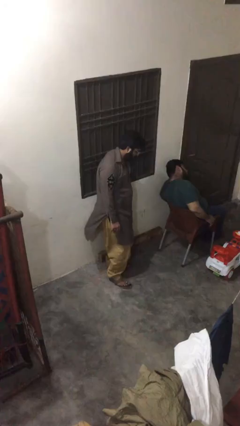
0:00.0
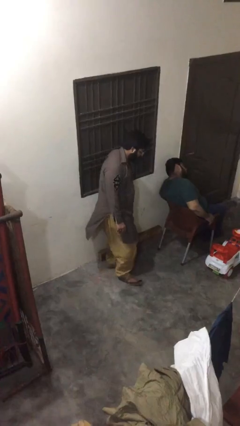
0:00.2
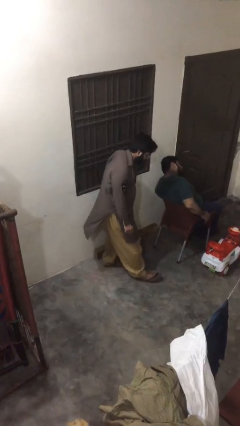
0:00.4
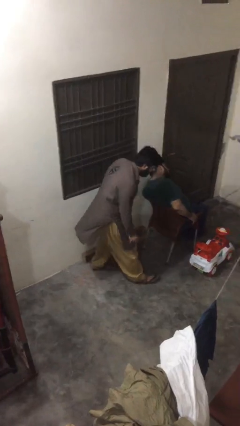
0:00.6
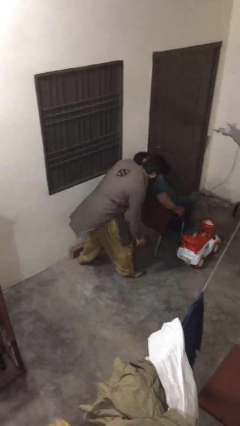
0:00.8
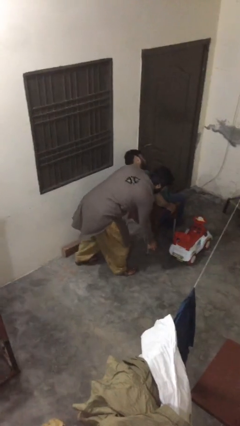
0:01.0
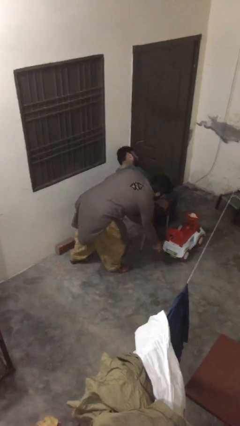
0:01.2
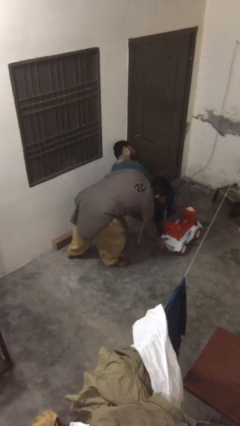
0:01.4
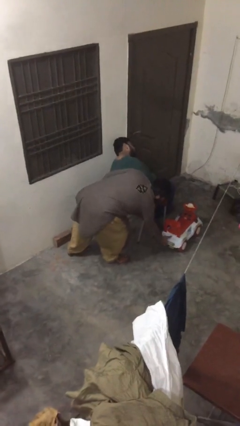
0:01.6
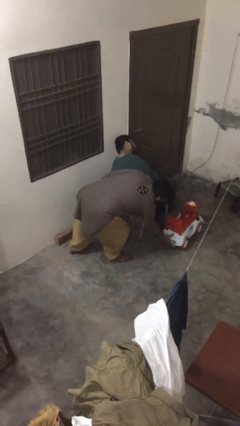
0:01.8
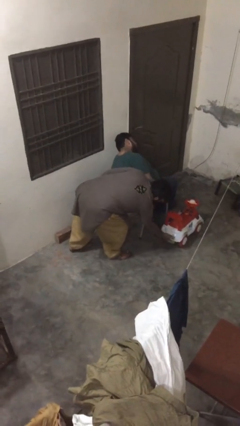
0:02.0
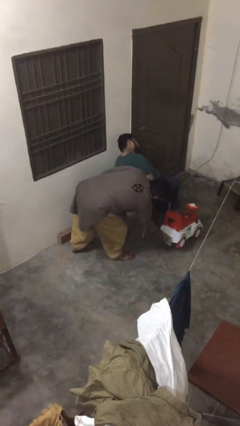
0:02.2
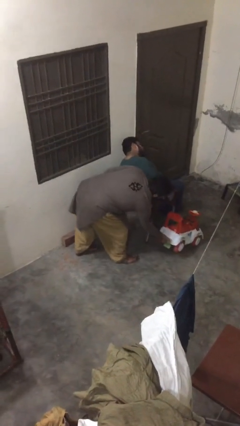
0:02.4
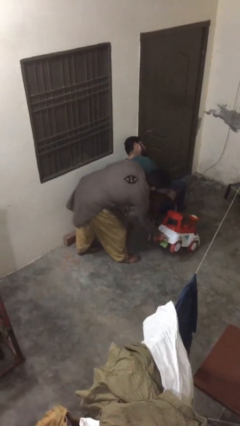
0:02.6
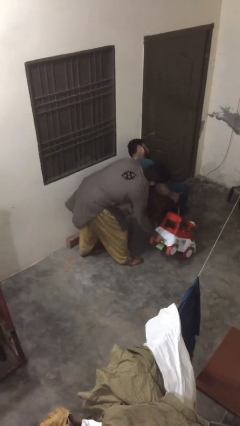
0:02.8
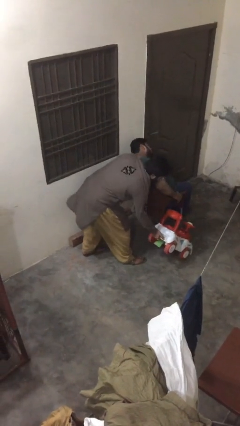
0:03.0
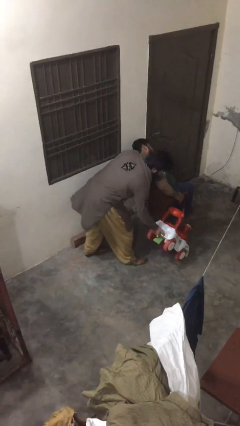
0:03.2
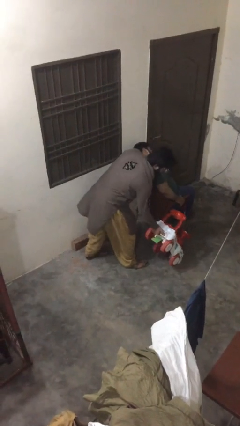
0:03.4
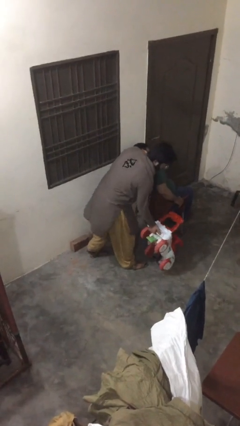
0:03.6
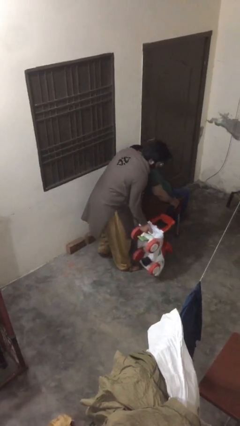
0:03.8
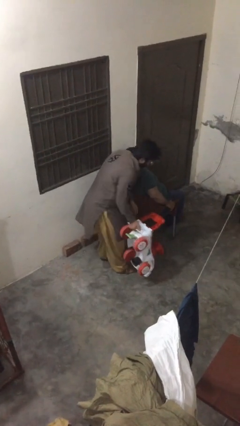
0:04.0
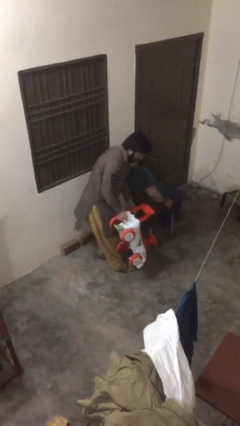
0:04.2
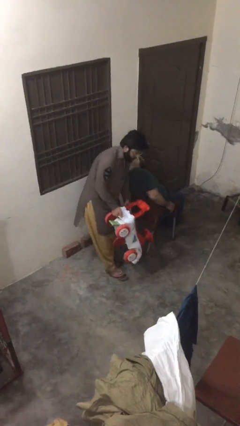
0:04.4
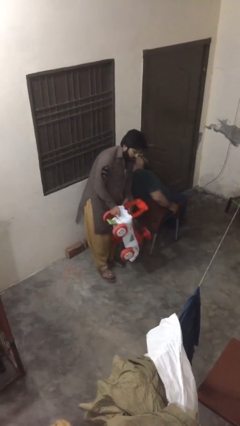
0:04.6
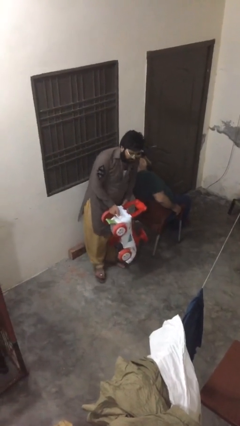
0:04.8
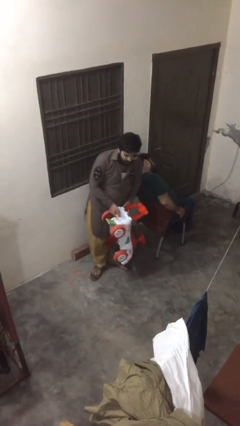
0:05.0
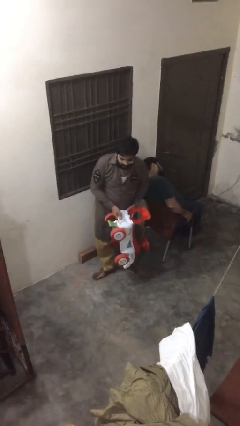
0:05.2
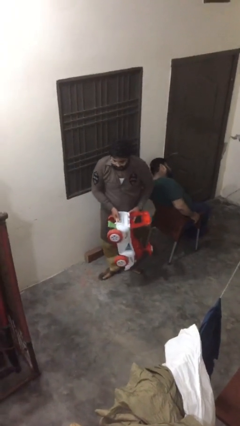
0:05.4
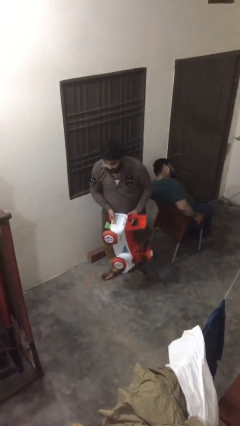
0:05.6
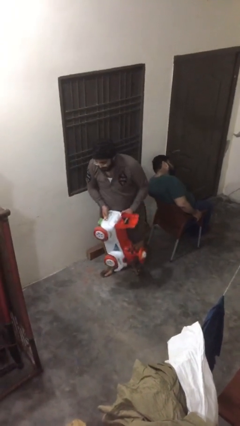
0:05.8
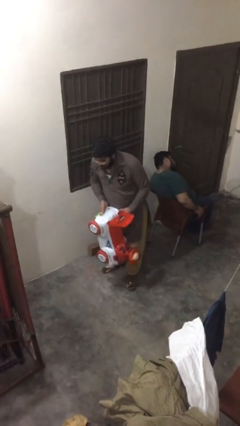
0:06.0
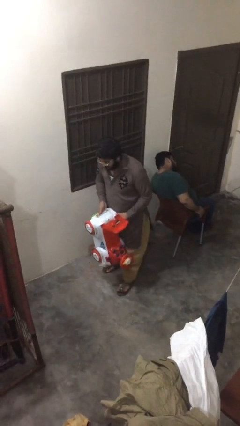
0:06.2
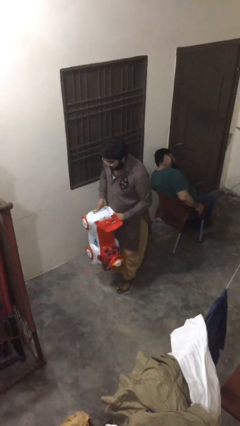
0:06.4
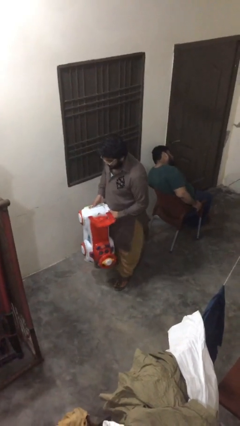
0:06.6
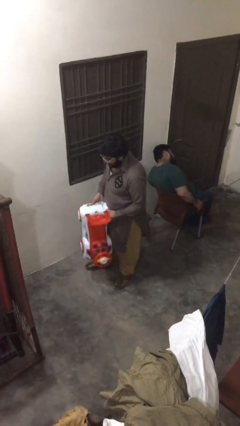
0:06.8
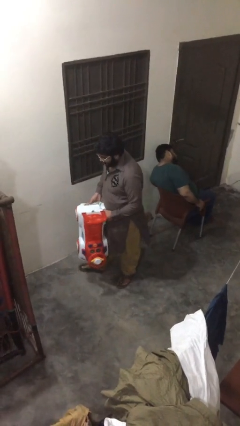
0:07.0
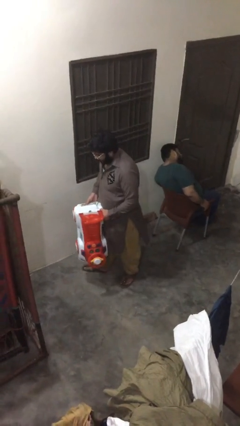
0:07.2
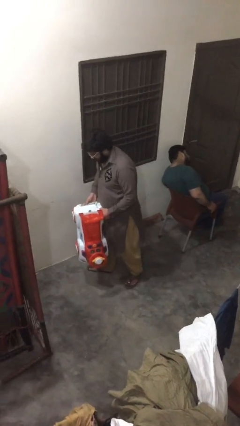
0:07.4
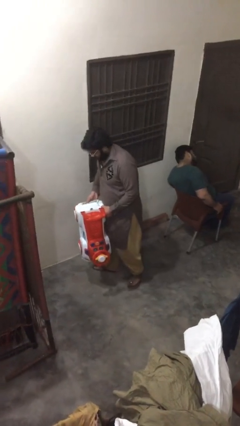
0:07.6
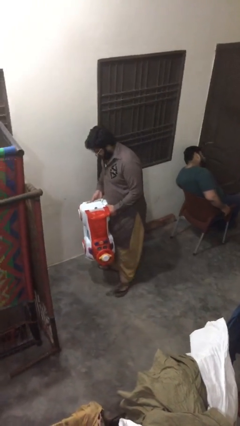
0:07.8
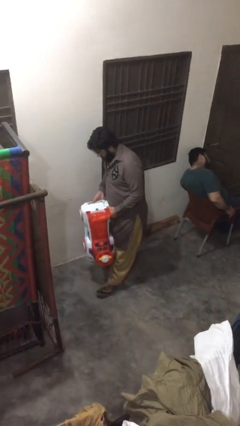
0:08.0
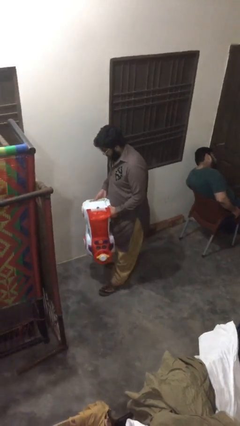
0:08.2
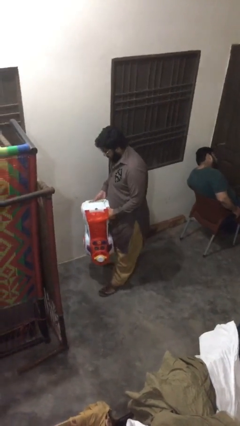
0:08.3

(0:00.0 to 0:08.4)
person steals object from person

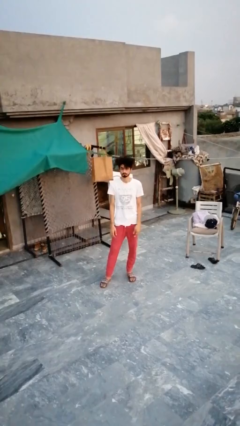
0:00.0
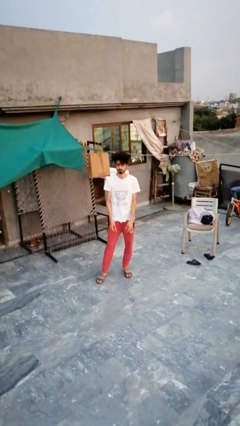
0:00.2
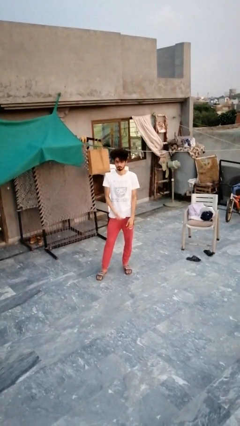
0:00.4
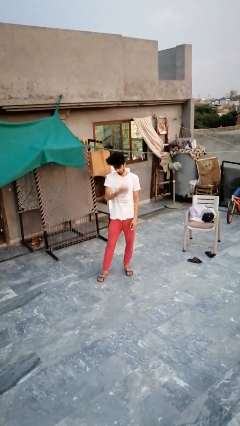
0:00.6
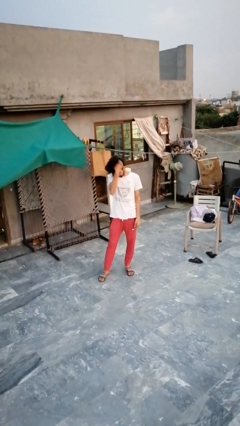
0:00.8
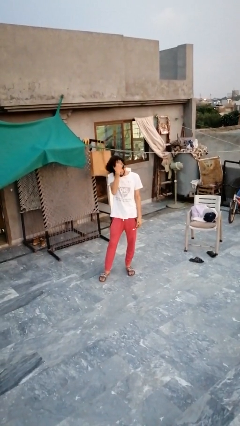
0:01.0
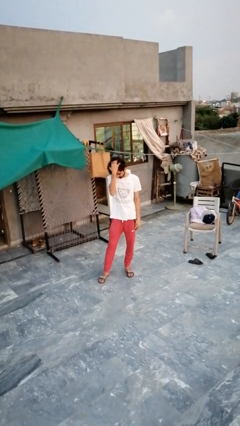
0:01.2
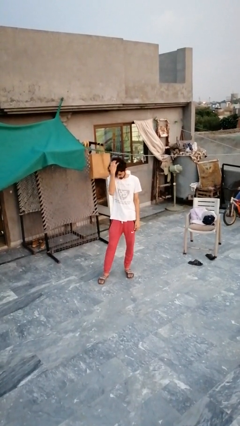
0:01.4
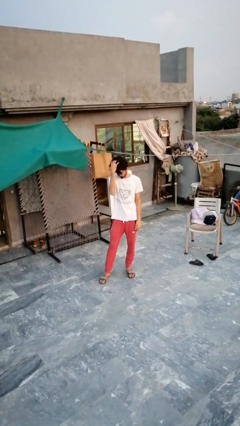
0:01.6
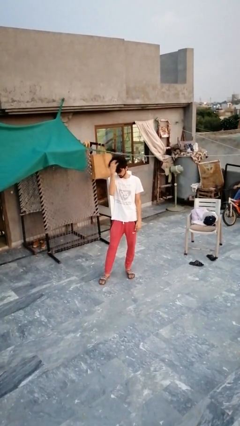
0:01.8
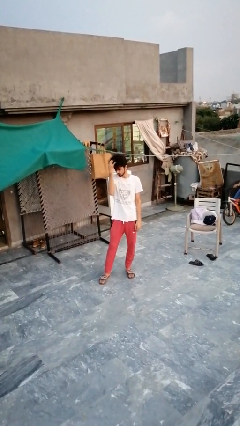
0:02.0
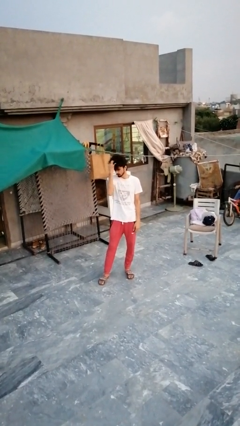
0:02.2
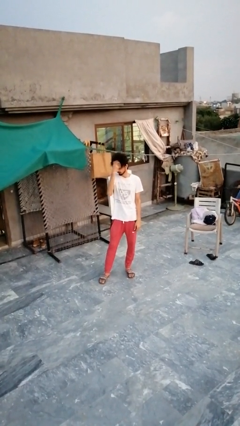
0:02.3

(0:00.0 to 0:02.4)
person strokes hair

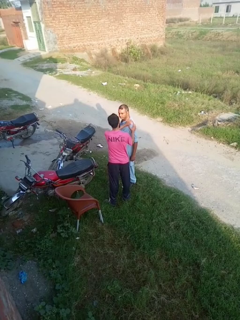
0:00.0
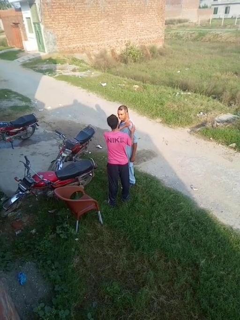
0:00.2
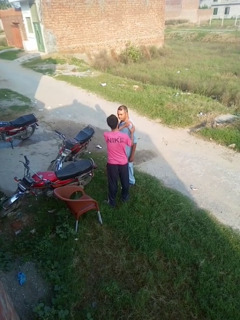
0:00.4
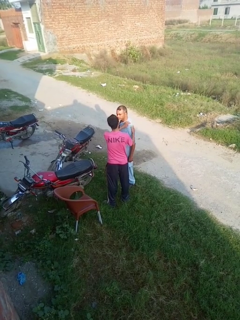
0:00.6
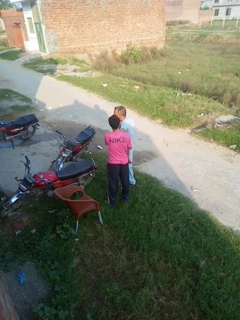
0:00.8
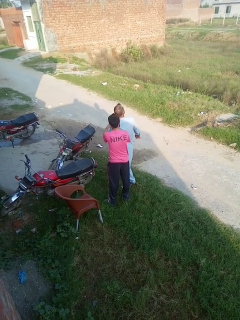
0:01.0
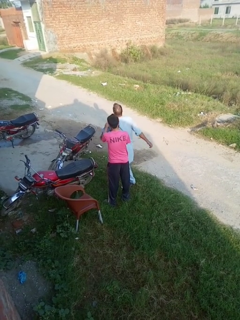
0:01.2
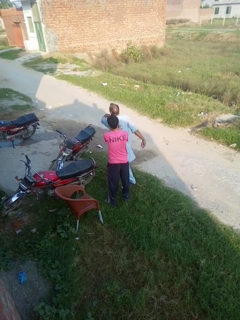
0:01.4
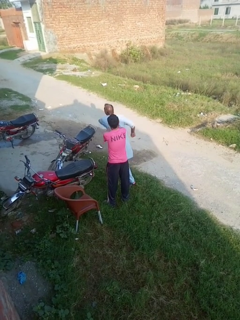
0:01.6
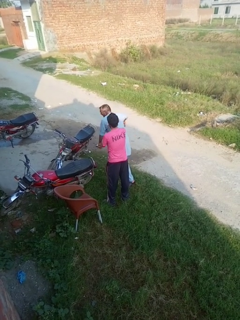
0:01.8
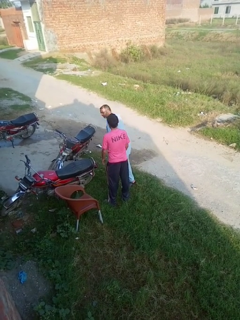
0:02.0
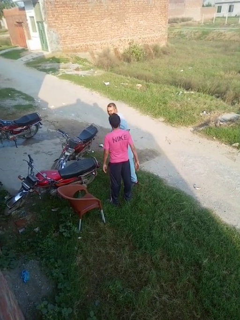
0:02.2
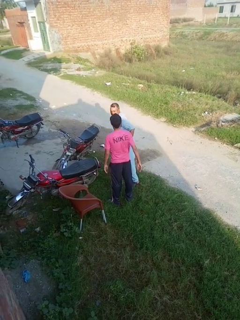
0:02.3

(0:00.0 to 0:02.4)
person spins person around

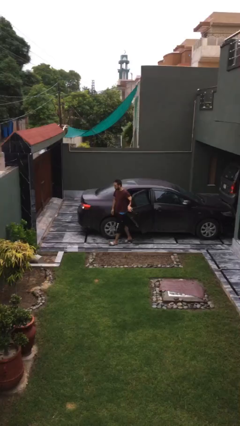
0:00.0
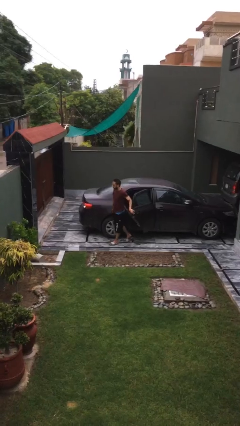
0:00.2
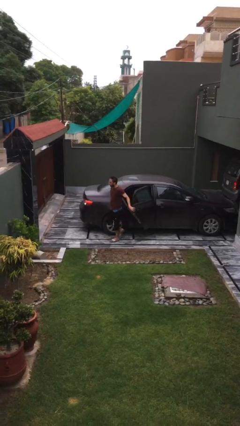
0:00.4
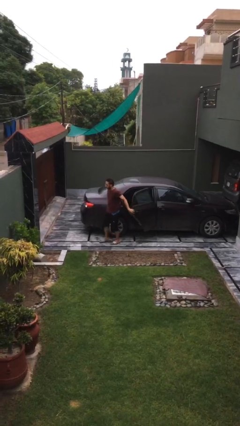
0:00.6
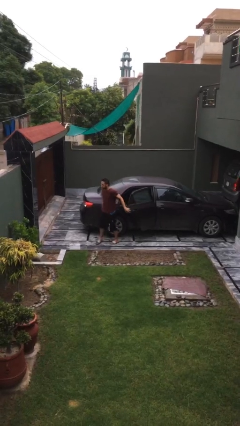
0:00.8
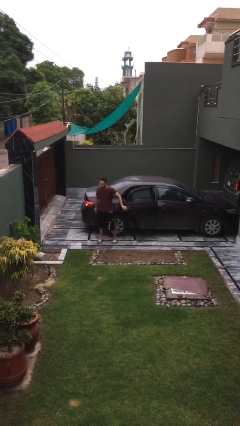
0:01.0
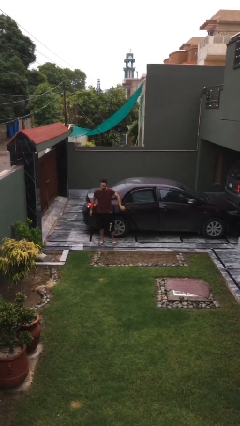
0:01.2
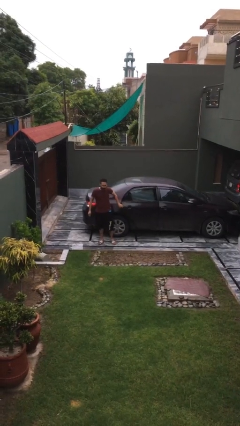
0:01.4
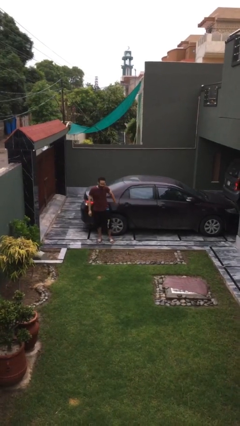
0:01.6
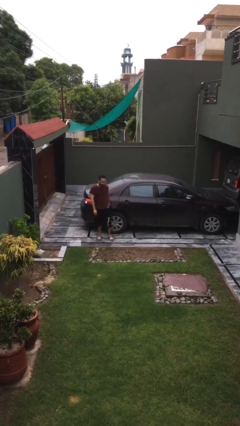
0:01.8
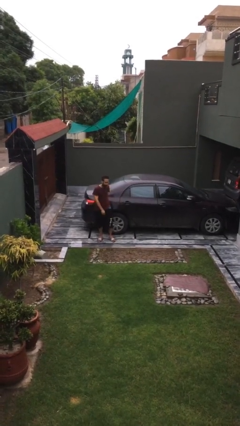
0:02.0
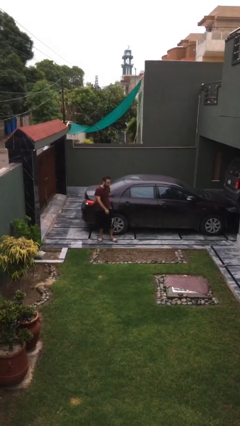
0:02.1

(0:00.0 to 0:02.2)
person closes car door

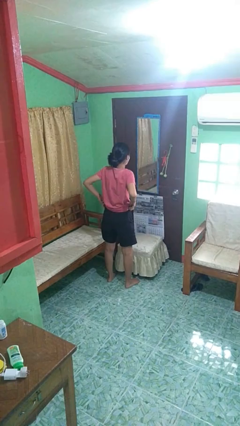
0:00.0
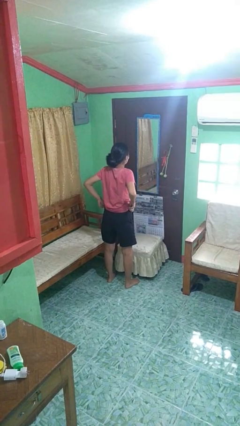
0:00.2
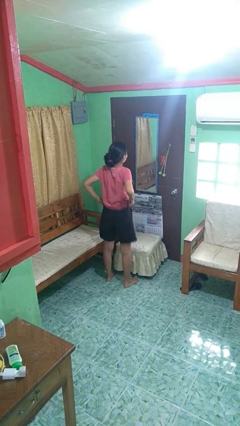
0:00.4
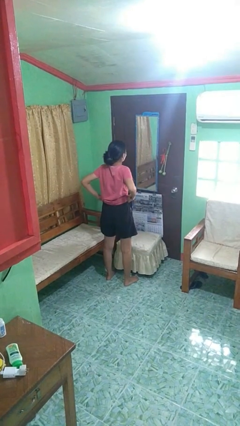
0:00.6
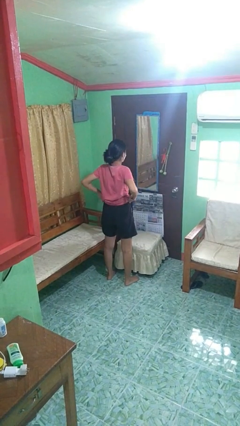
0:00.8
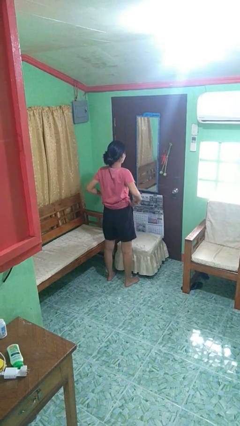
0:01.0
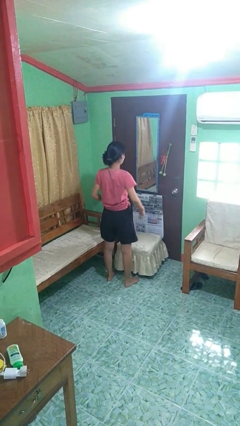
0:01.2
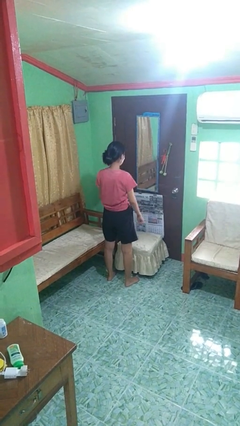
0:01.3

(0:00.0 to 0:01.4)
person hikes up pants

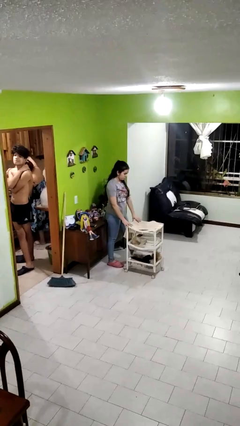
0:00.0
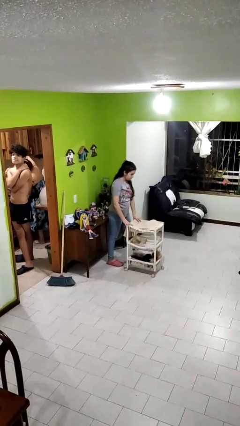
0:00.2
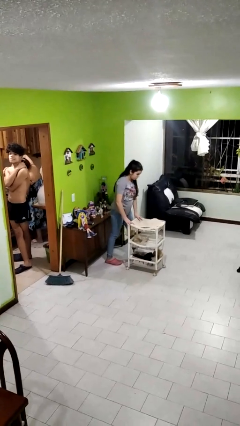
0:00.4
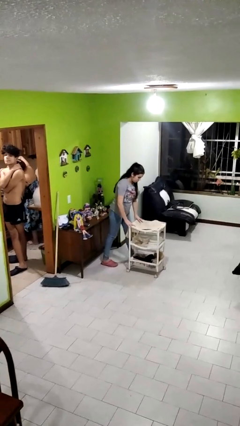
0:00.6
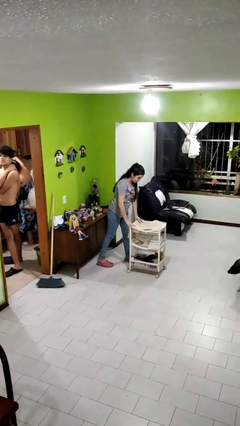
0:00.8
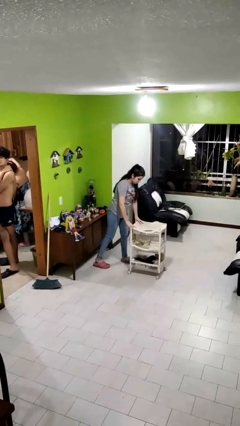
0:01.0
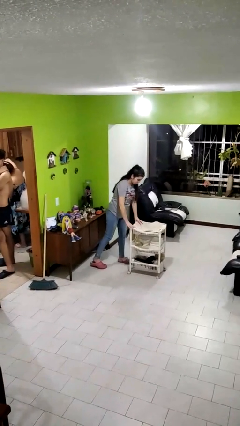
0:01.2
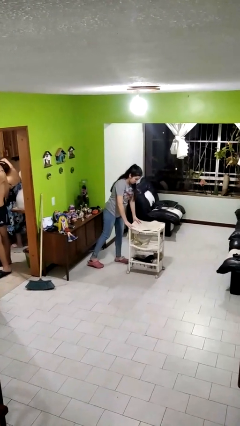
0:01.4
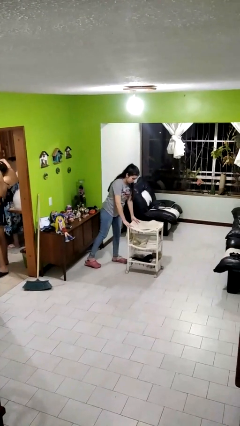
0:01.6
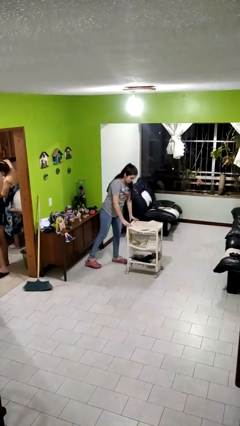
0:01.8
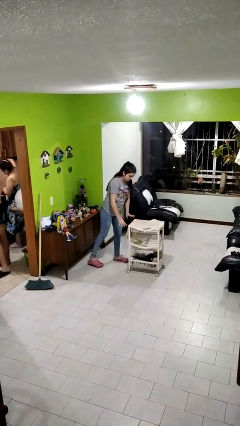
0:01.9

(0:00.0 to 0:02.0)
person pushes wheeled cart
